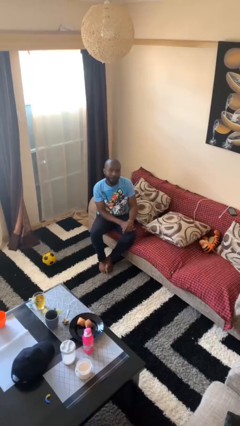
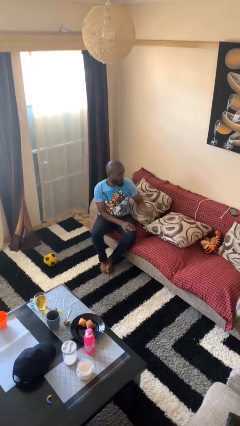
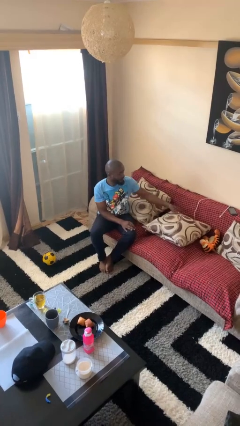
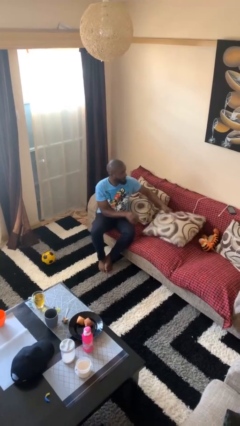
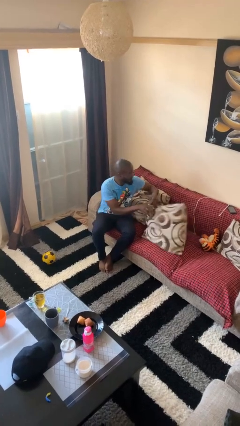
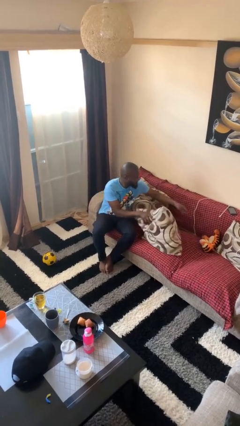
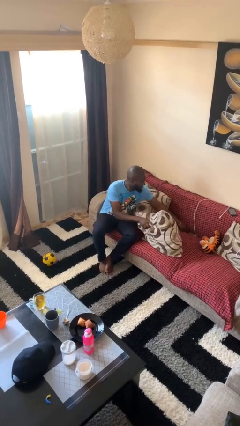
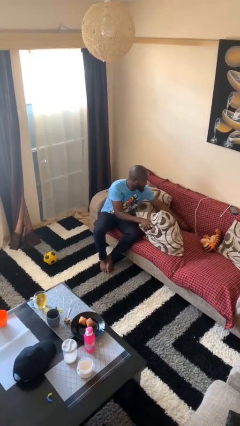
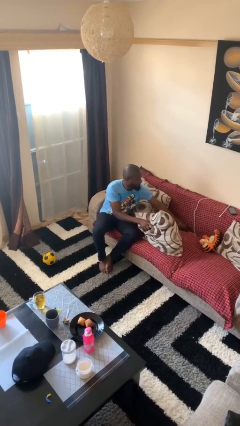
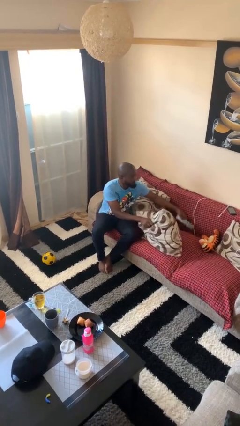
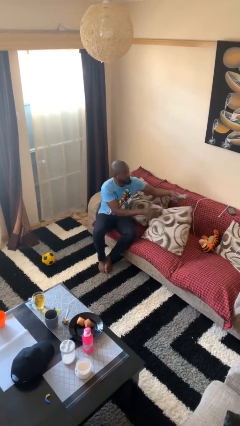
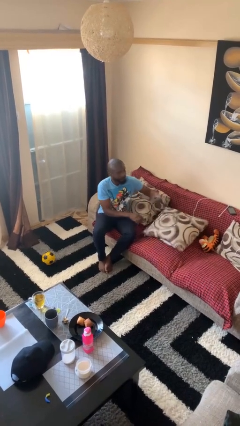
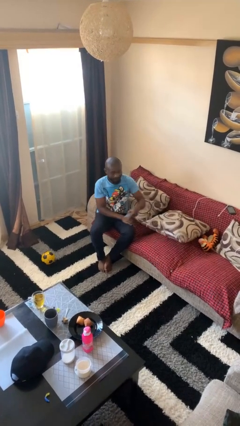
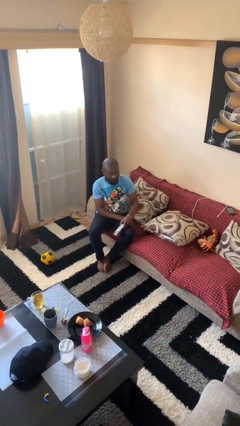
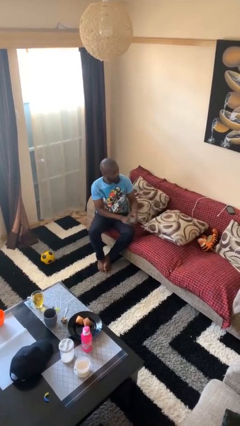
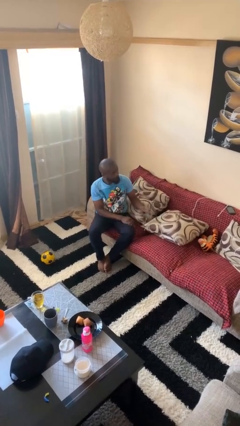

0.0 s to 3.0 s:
person searches in couch

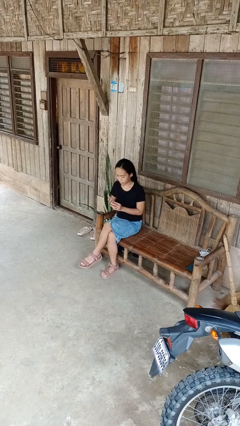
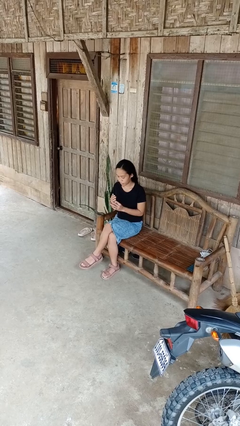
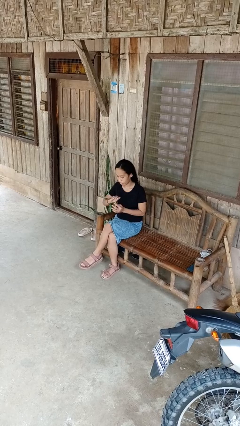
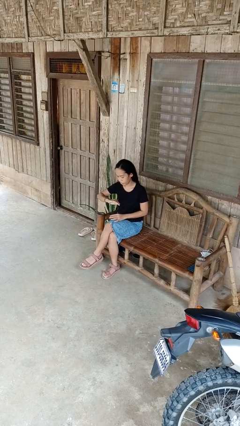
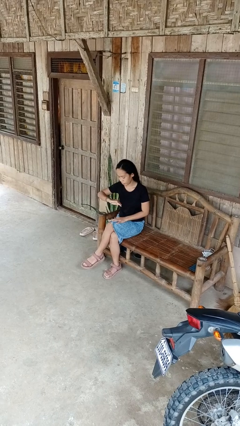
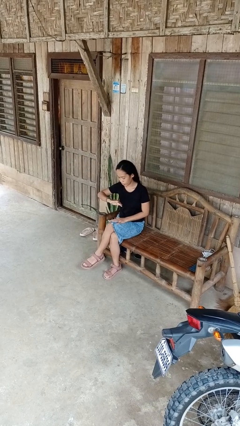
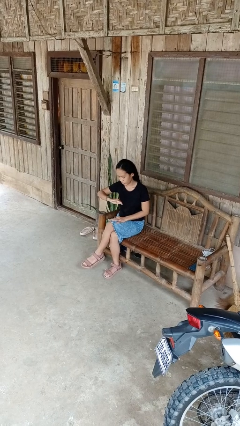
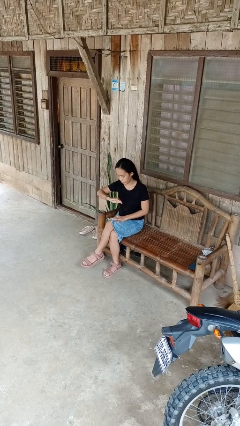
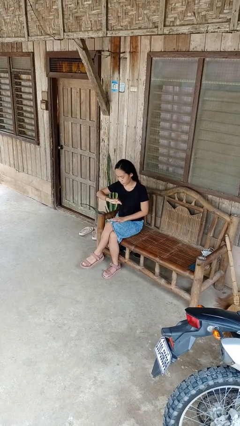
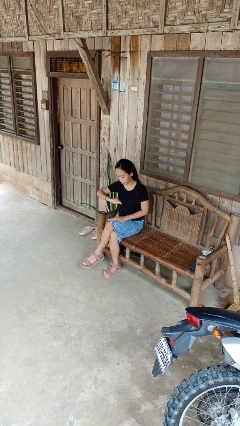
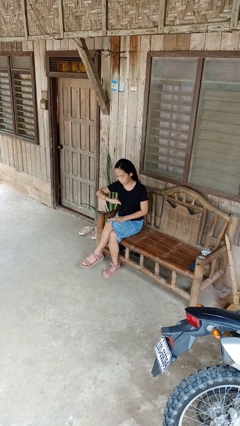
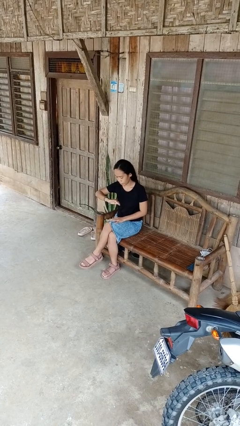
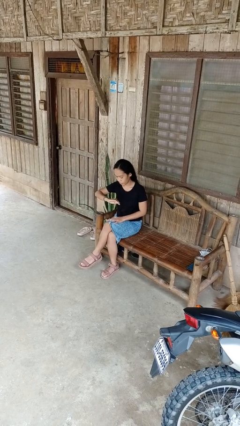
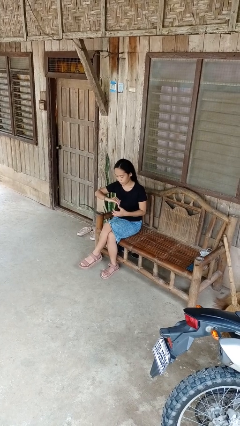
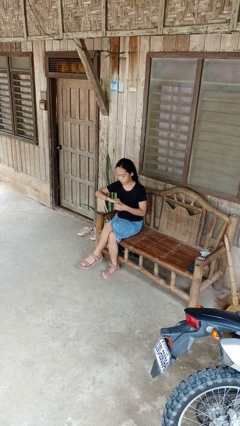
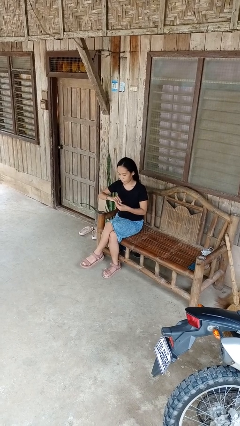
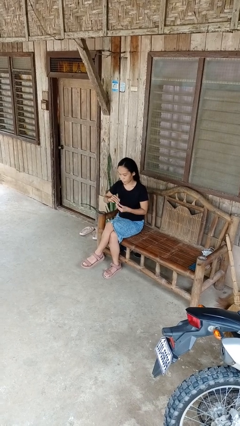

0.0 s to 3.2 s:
person puts on ring

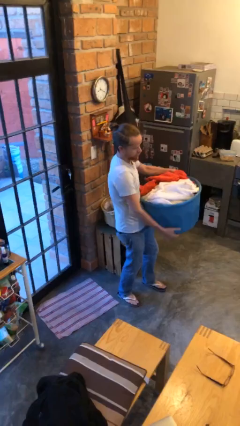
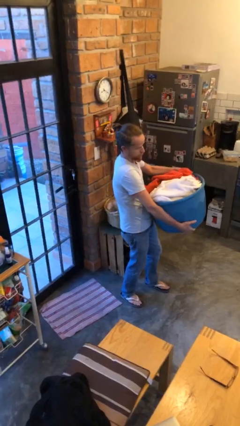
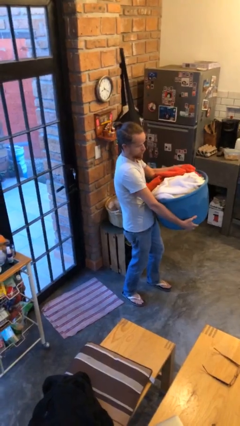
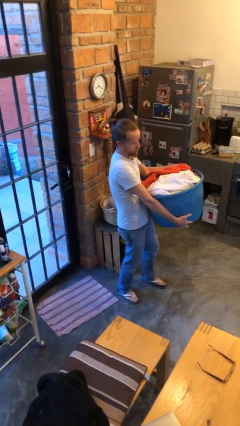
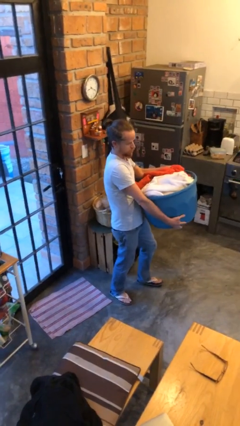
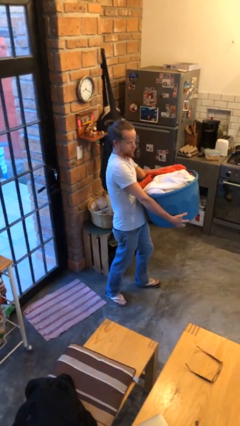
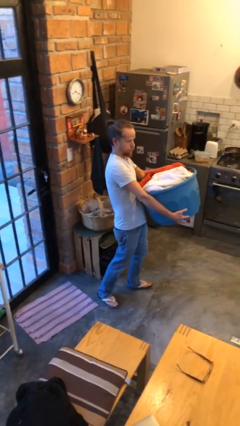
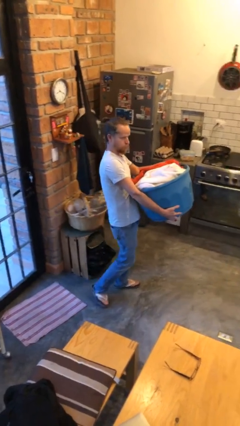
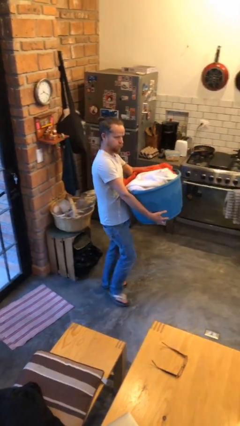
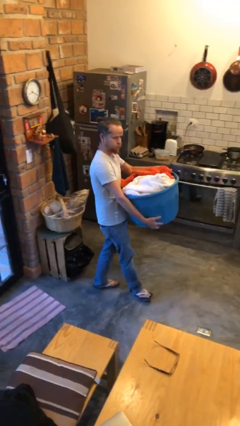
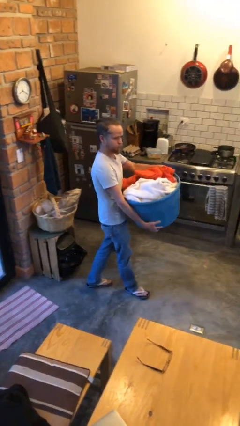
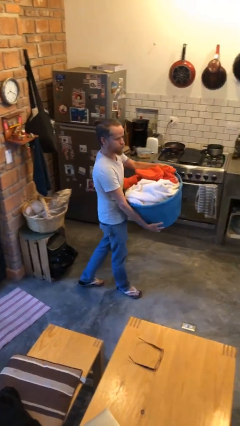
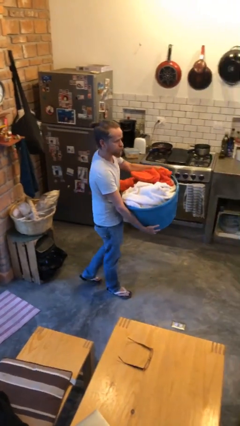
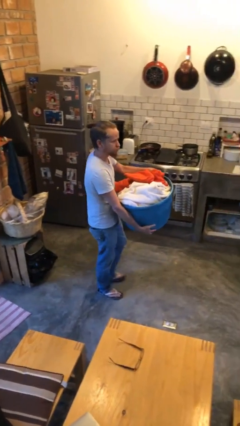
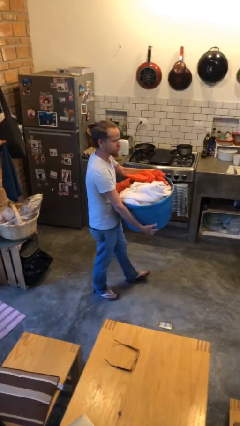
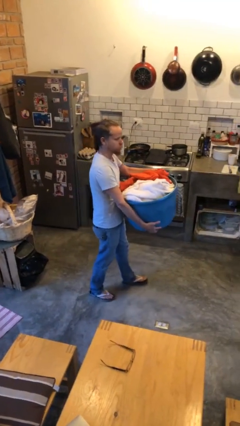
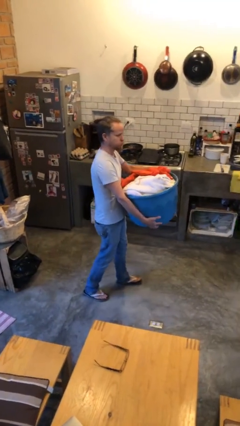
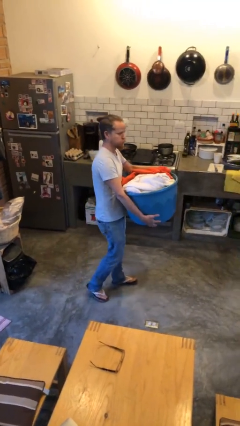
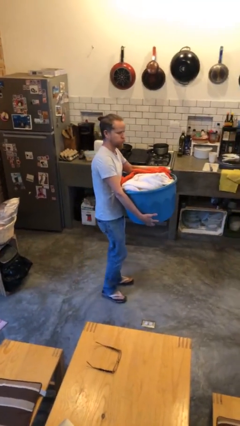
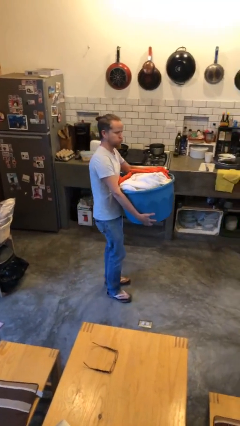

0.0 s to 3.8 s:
person carries laundry basket

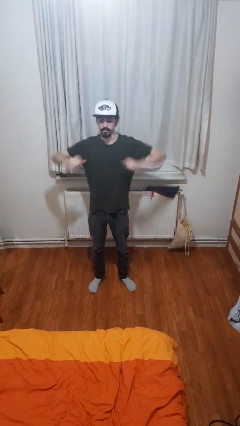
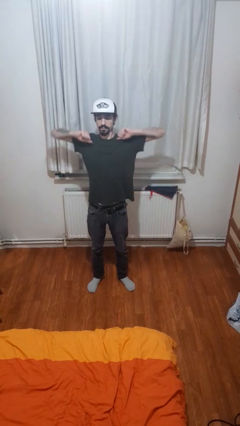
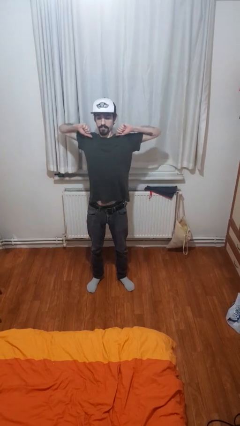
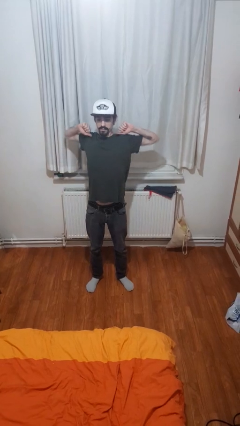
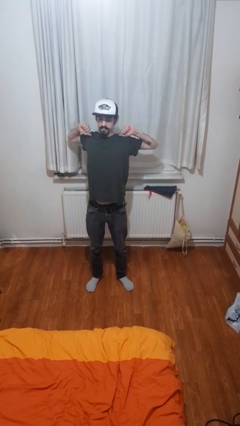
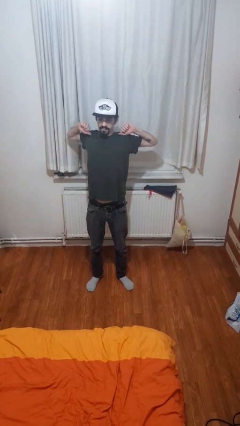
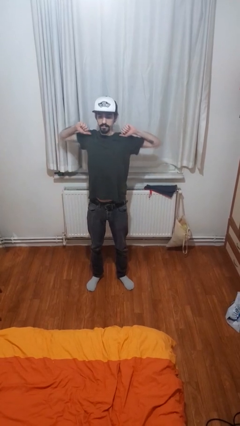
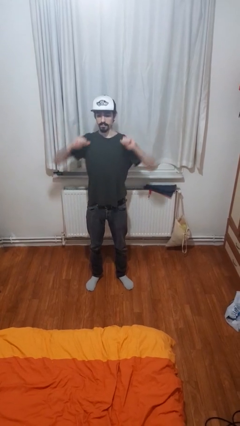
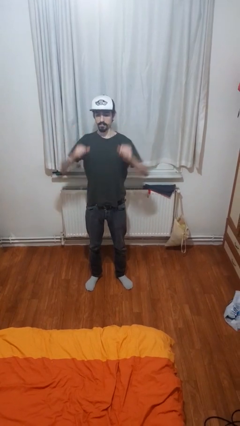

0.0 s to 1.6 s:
person stretches arms to side

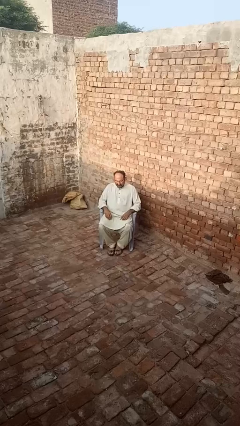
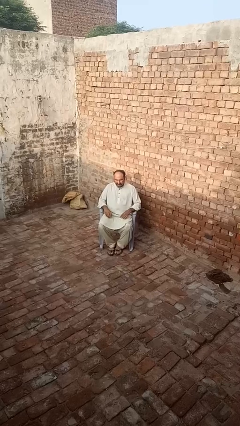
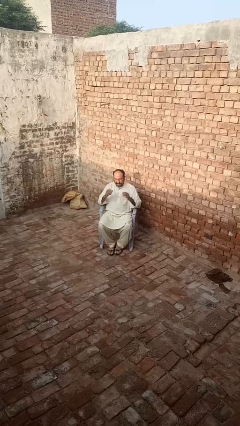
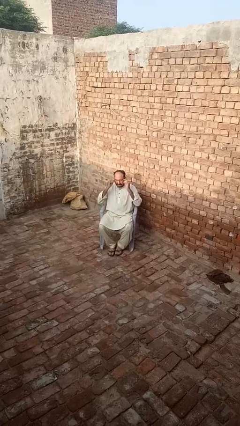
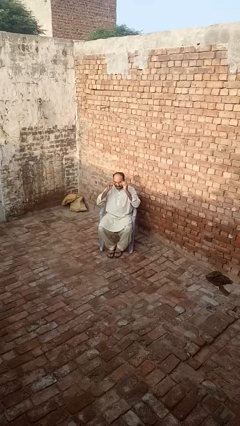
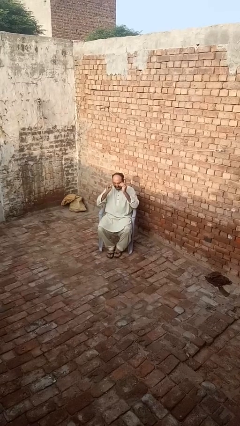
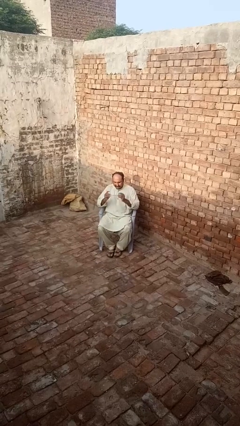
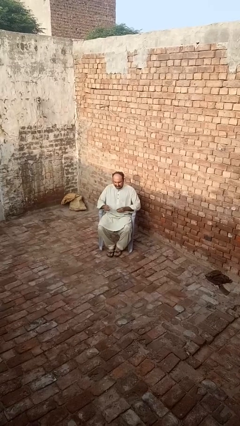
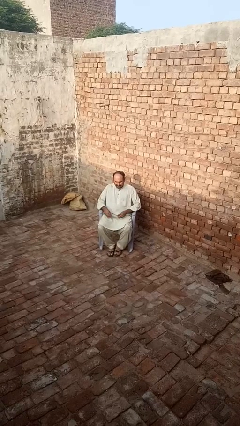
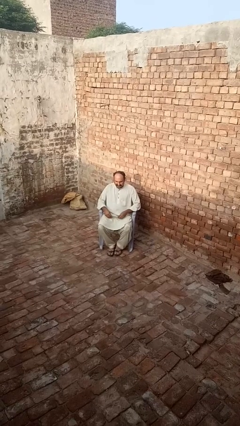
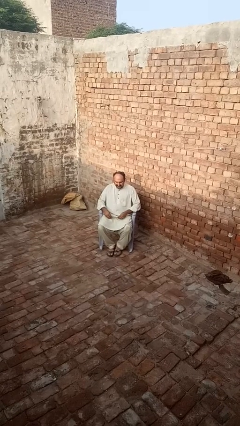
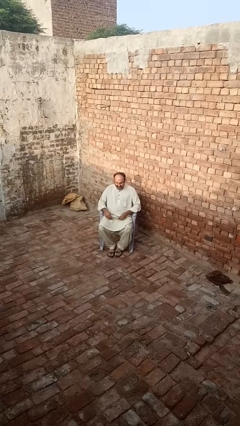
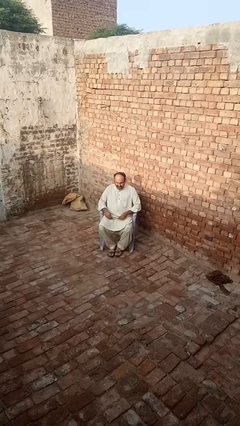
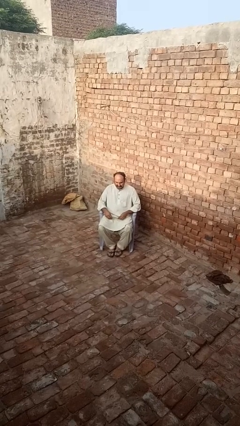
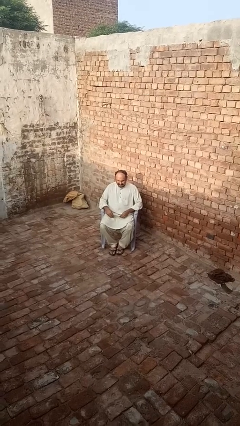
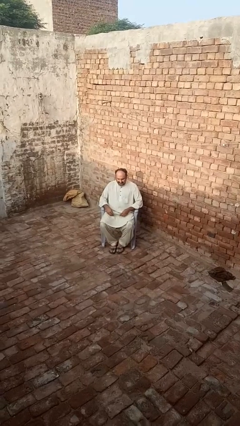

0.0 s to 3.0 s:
person takes off glasses

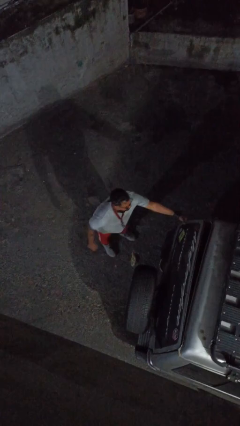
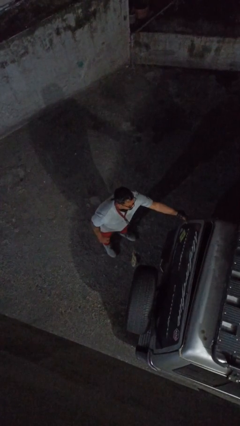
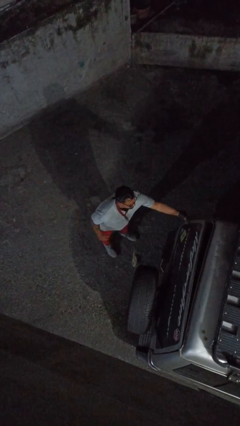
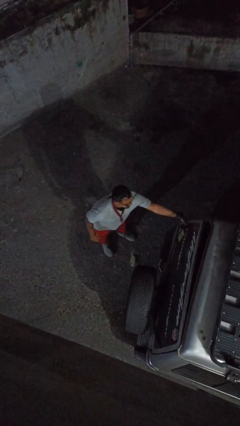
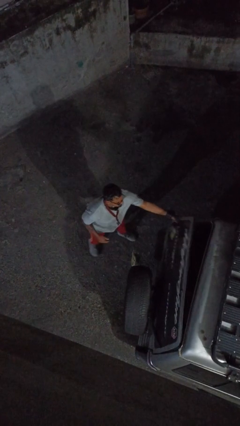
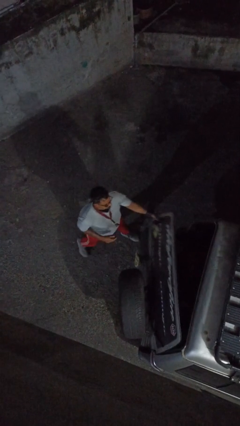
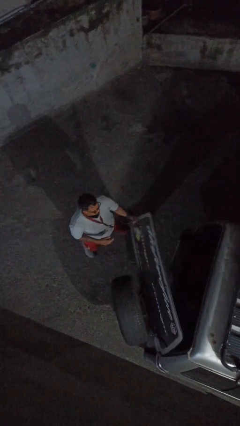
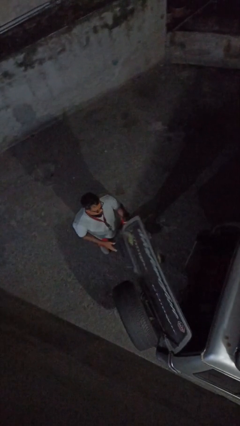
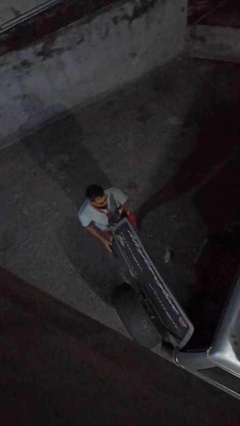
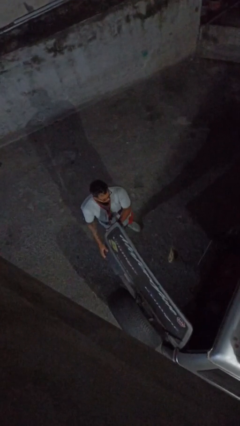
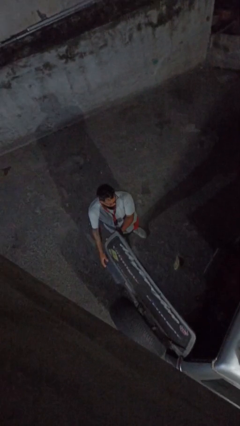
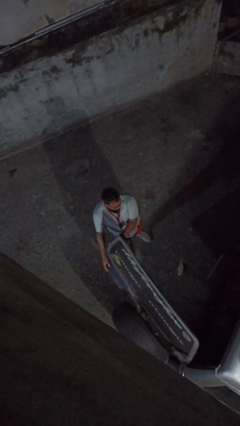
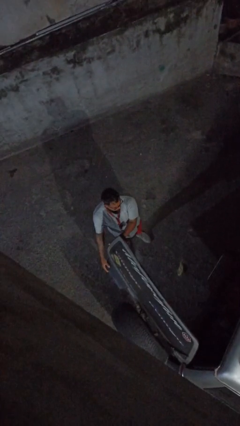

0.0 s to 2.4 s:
person opens car trunk
